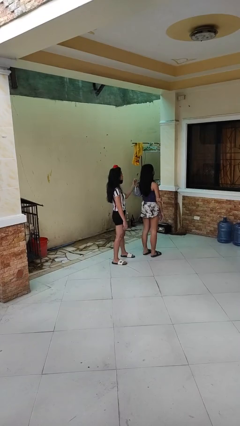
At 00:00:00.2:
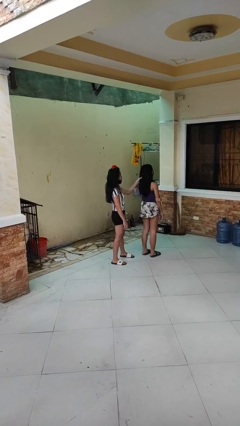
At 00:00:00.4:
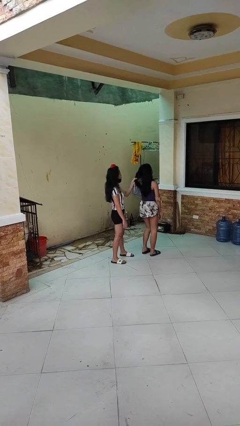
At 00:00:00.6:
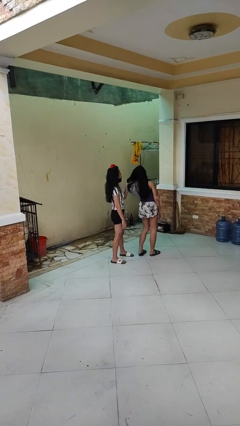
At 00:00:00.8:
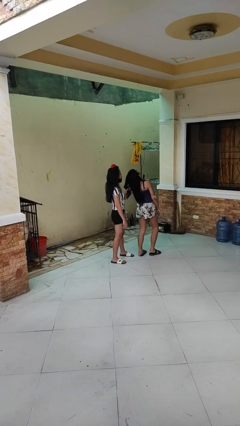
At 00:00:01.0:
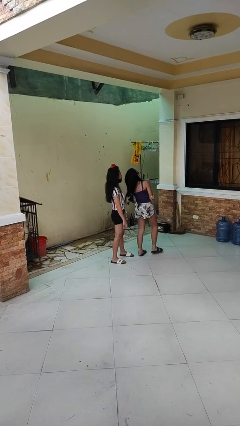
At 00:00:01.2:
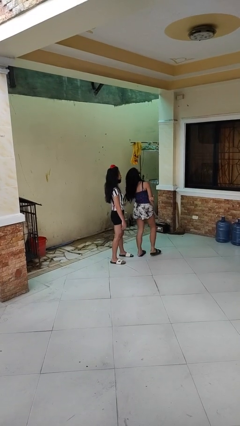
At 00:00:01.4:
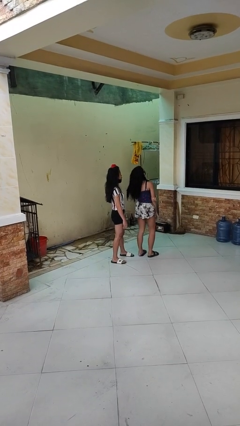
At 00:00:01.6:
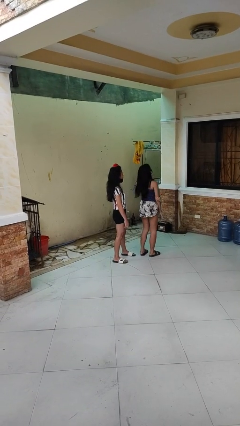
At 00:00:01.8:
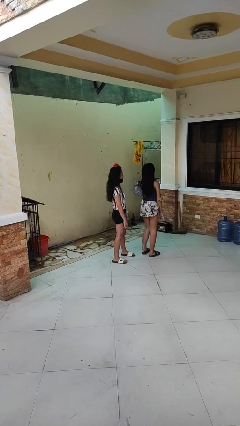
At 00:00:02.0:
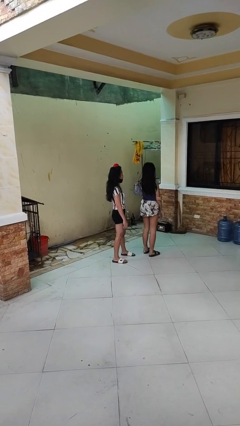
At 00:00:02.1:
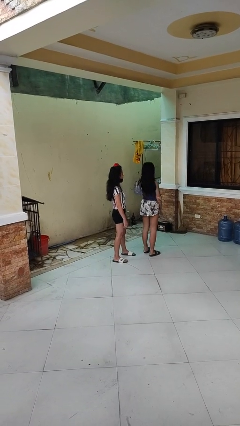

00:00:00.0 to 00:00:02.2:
person grabs person by hair

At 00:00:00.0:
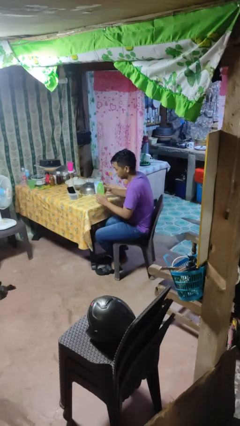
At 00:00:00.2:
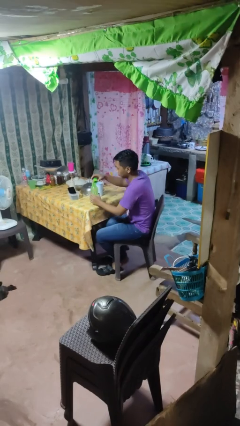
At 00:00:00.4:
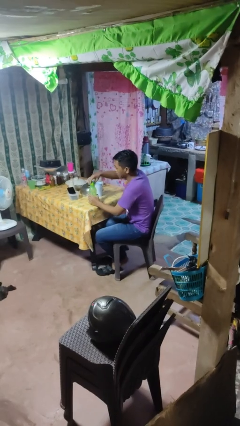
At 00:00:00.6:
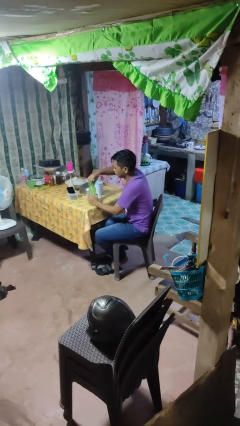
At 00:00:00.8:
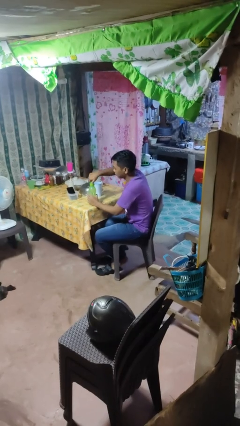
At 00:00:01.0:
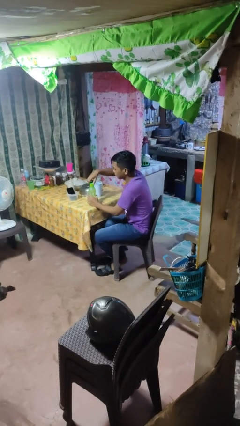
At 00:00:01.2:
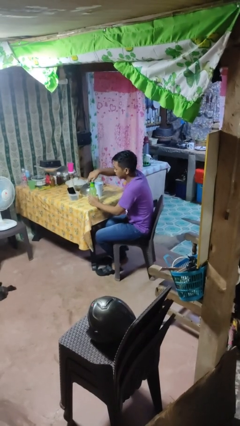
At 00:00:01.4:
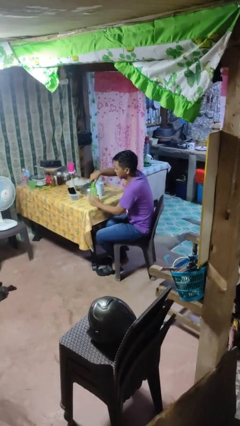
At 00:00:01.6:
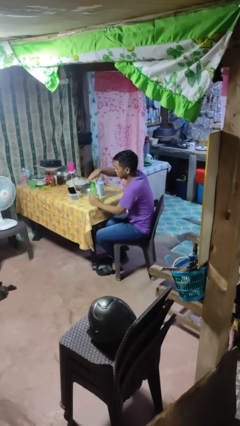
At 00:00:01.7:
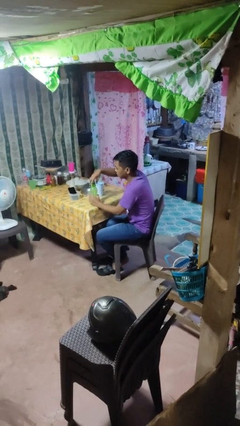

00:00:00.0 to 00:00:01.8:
person screws lid to bottle

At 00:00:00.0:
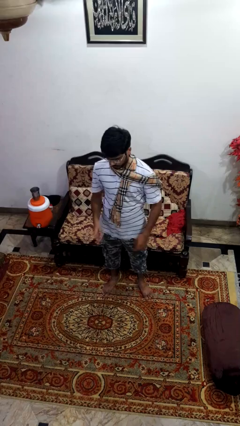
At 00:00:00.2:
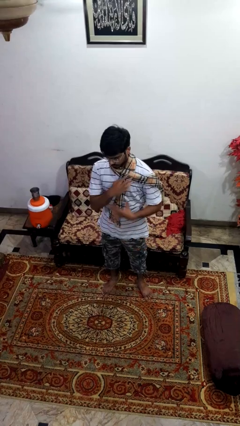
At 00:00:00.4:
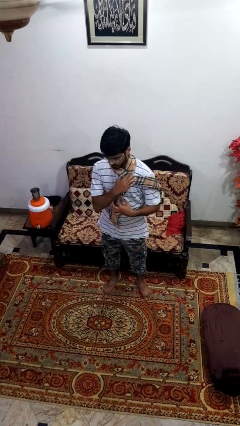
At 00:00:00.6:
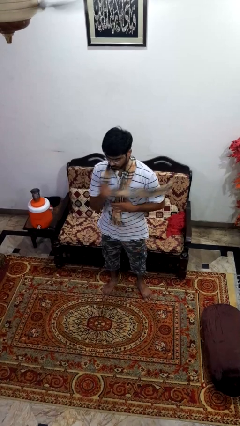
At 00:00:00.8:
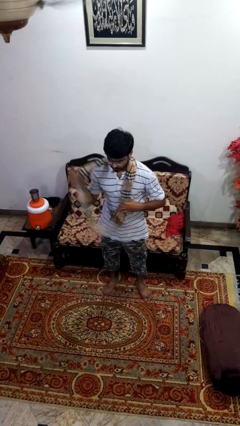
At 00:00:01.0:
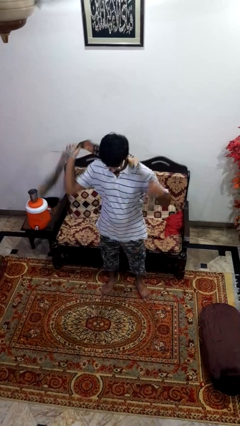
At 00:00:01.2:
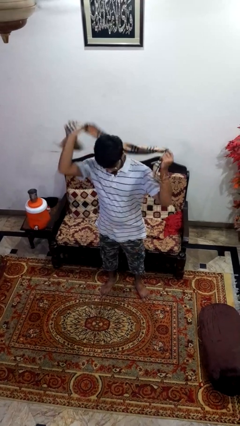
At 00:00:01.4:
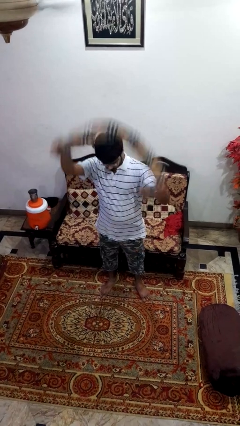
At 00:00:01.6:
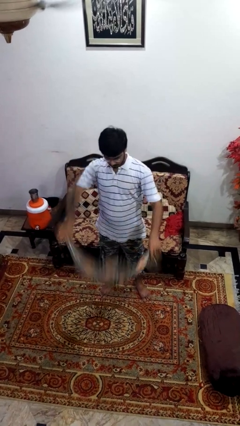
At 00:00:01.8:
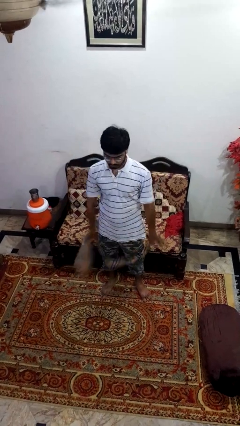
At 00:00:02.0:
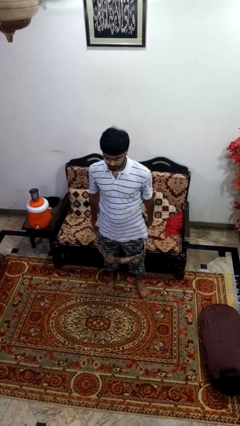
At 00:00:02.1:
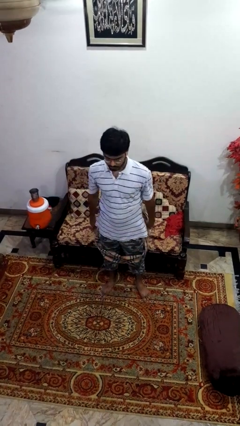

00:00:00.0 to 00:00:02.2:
person takes off scarf

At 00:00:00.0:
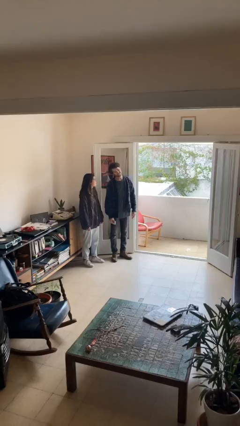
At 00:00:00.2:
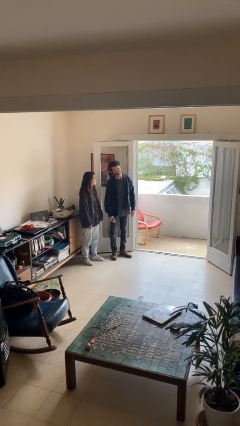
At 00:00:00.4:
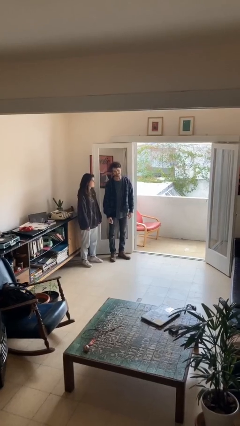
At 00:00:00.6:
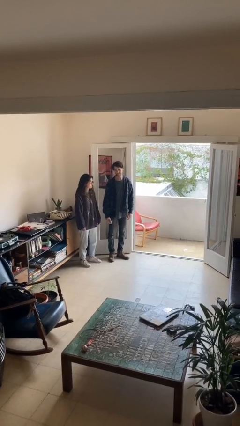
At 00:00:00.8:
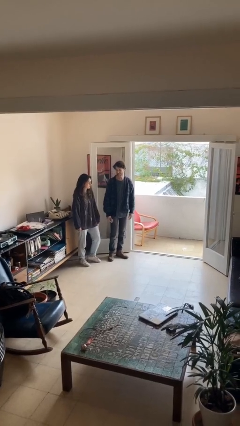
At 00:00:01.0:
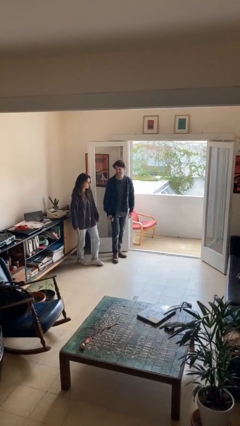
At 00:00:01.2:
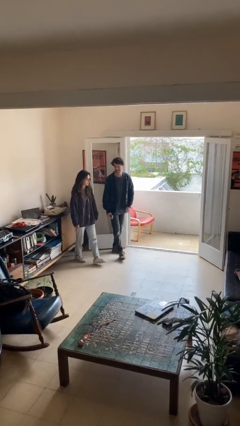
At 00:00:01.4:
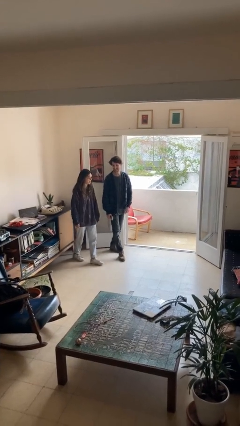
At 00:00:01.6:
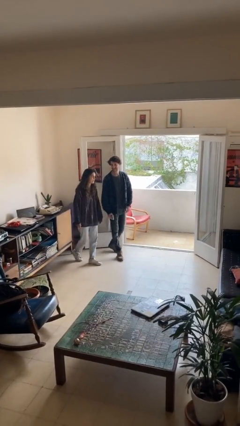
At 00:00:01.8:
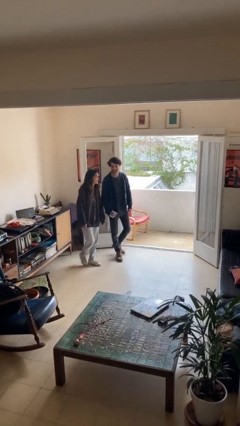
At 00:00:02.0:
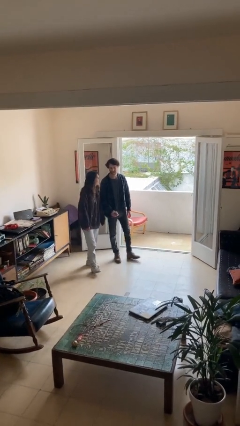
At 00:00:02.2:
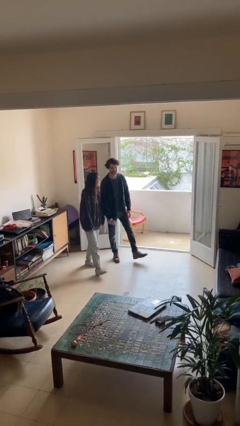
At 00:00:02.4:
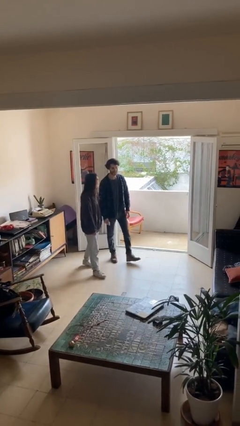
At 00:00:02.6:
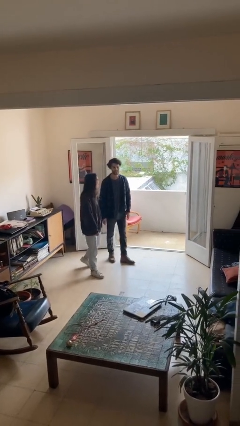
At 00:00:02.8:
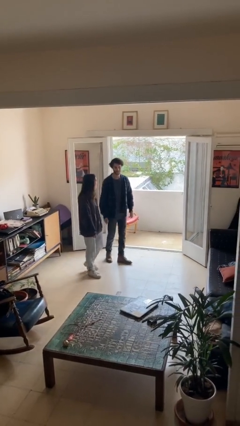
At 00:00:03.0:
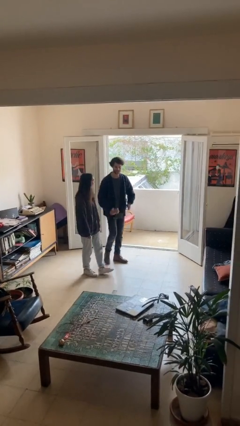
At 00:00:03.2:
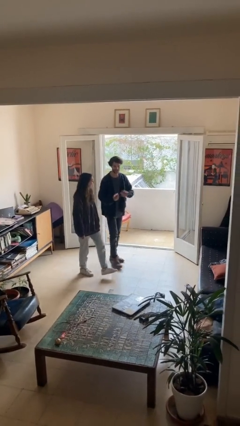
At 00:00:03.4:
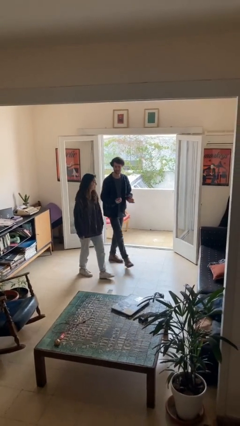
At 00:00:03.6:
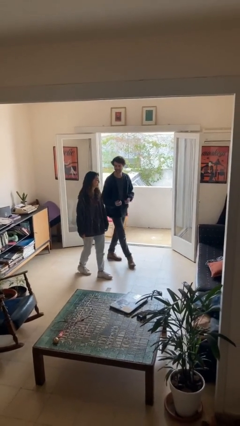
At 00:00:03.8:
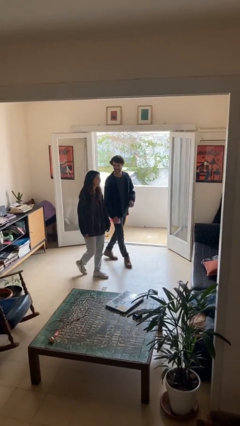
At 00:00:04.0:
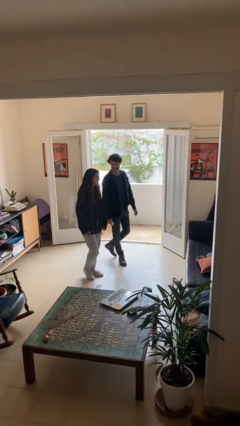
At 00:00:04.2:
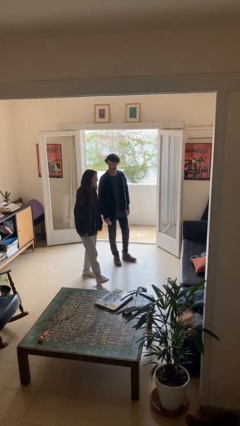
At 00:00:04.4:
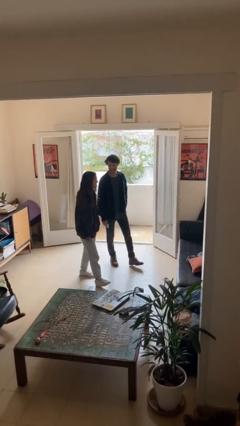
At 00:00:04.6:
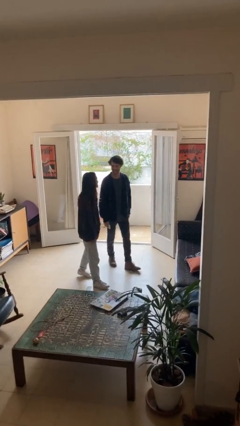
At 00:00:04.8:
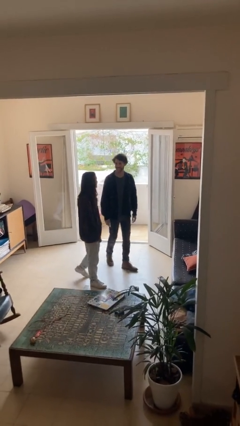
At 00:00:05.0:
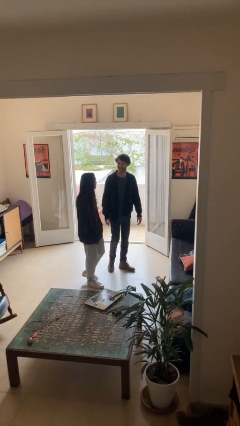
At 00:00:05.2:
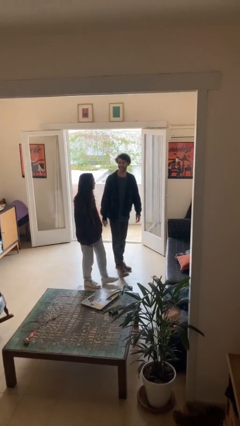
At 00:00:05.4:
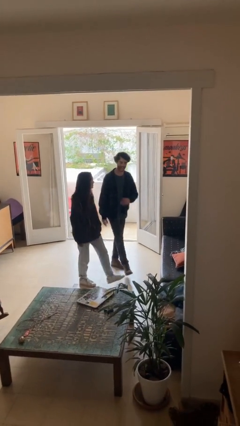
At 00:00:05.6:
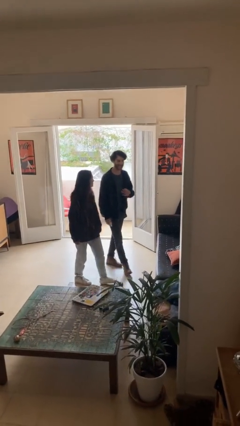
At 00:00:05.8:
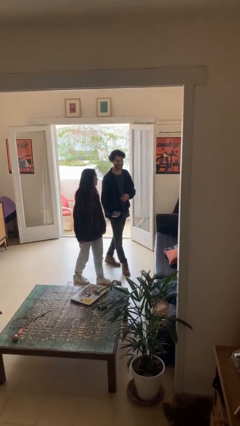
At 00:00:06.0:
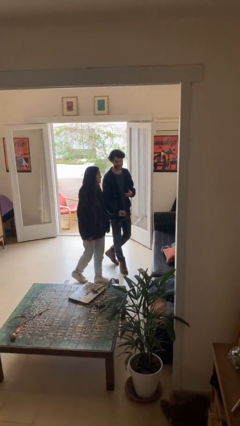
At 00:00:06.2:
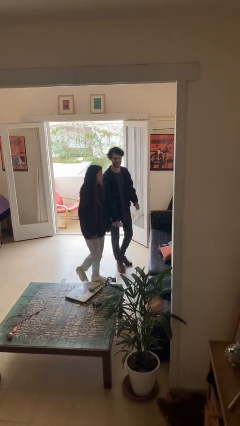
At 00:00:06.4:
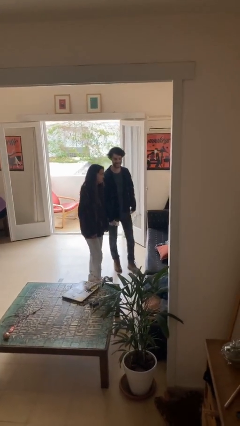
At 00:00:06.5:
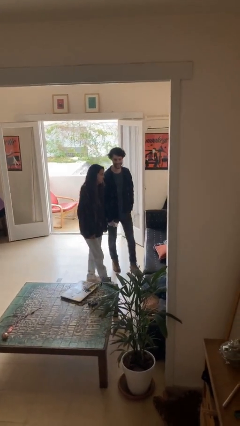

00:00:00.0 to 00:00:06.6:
person talks to person

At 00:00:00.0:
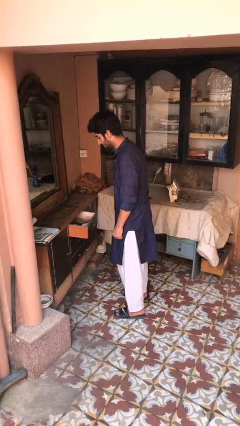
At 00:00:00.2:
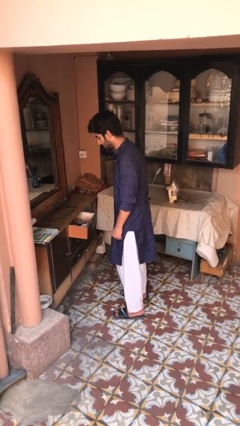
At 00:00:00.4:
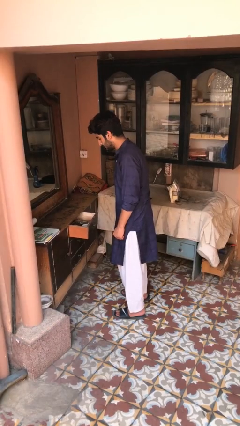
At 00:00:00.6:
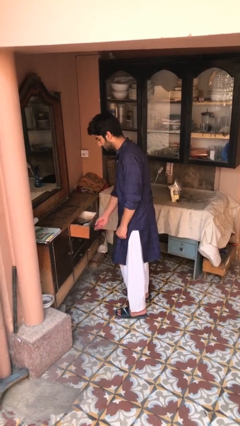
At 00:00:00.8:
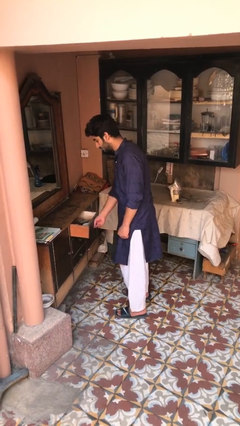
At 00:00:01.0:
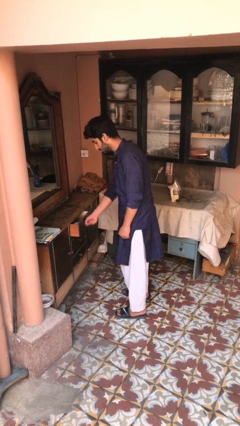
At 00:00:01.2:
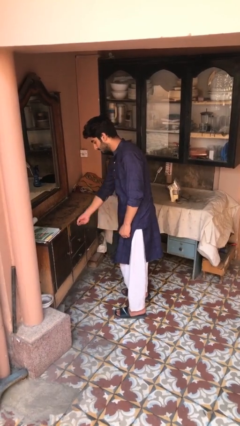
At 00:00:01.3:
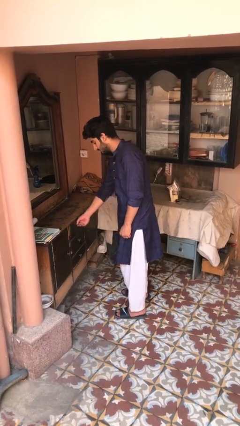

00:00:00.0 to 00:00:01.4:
person closes dresser drawer

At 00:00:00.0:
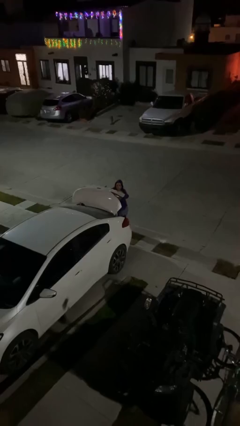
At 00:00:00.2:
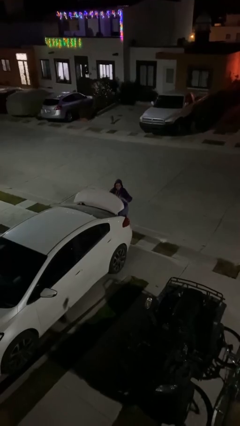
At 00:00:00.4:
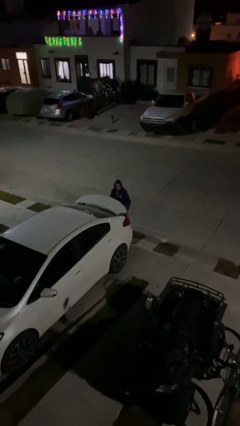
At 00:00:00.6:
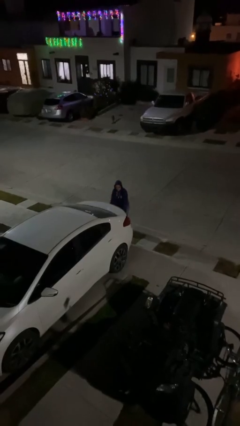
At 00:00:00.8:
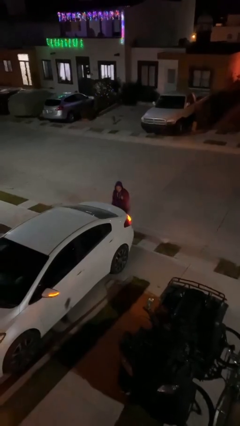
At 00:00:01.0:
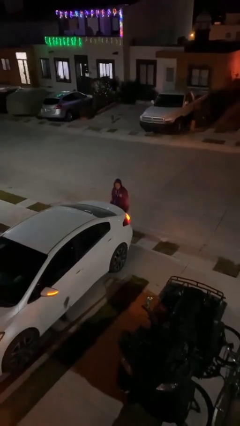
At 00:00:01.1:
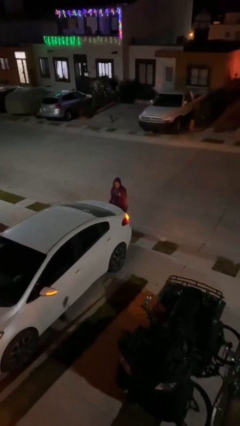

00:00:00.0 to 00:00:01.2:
person closes car trunk

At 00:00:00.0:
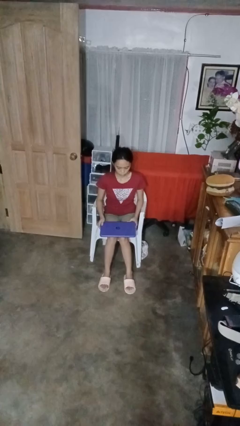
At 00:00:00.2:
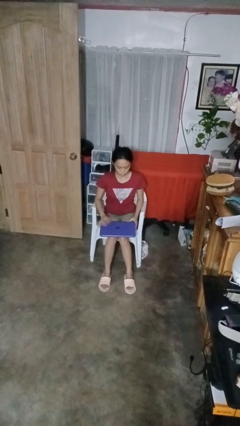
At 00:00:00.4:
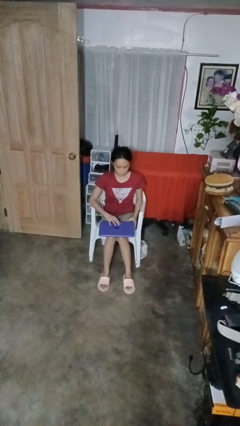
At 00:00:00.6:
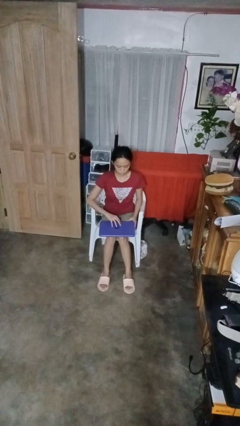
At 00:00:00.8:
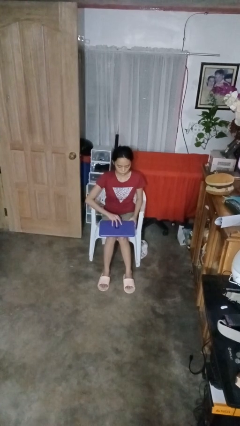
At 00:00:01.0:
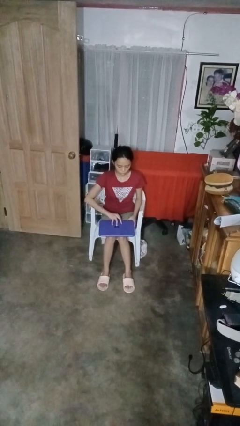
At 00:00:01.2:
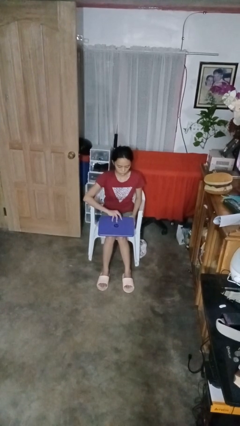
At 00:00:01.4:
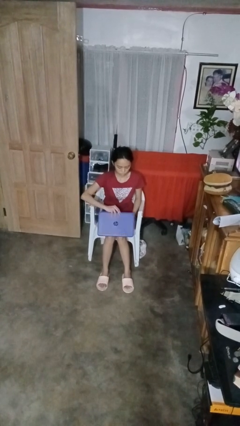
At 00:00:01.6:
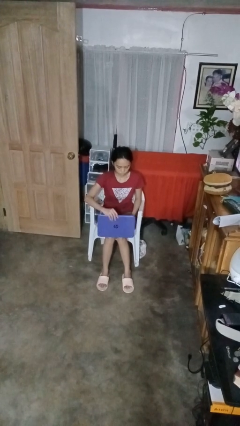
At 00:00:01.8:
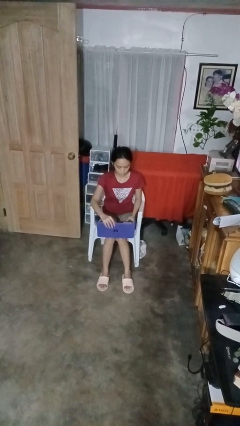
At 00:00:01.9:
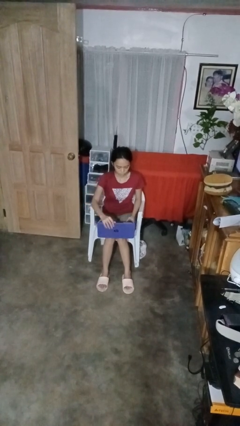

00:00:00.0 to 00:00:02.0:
person opens laptop
